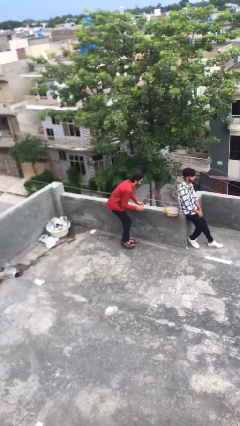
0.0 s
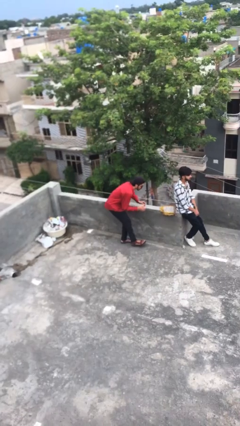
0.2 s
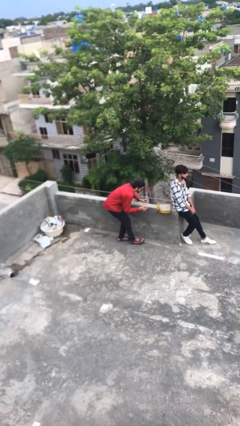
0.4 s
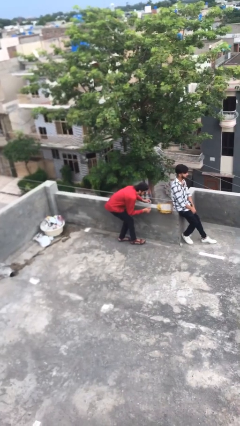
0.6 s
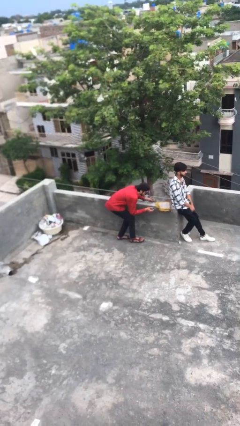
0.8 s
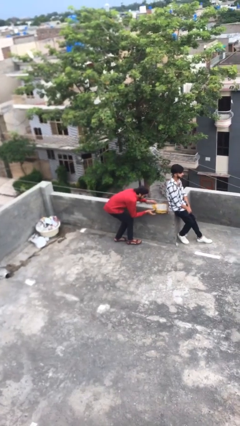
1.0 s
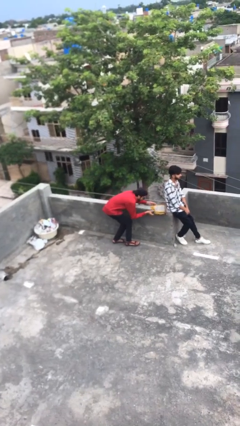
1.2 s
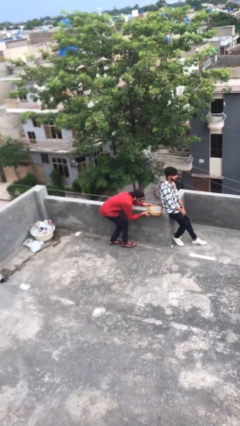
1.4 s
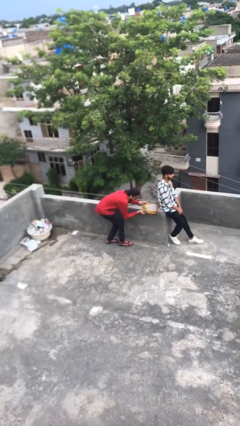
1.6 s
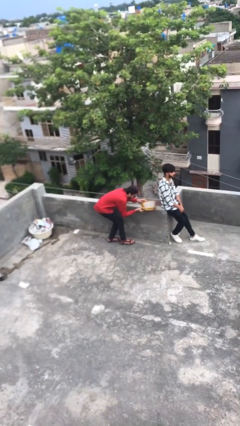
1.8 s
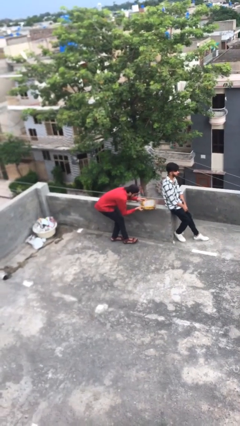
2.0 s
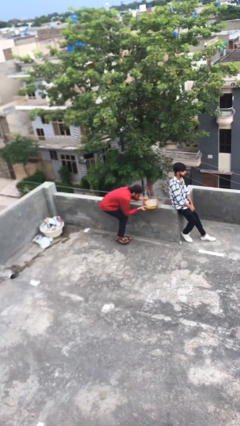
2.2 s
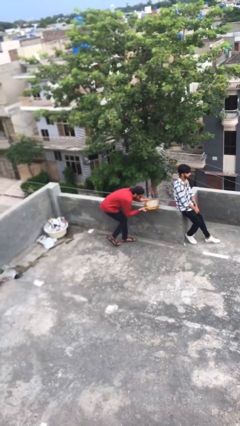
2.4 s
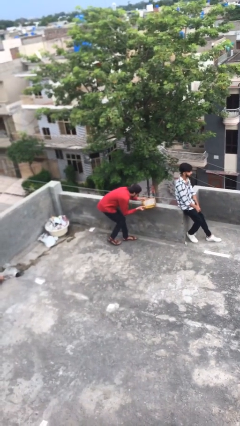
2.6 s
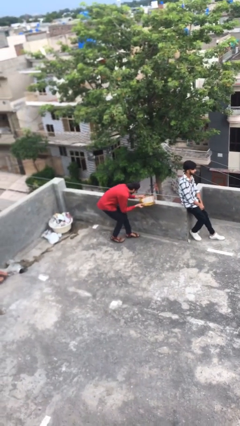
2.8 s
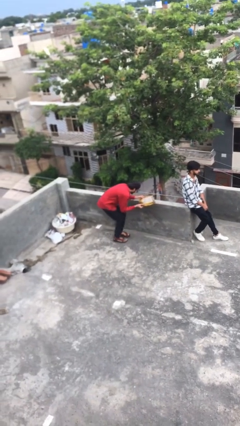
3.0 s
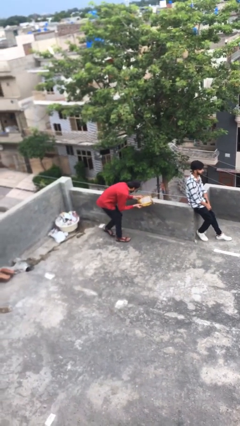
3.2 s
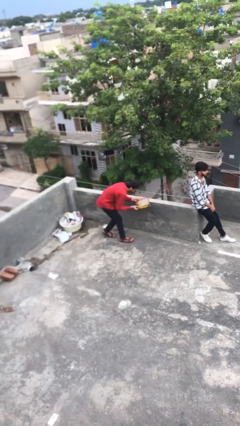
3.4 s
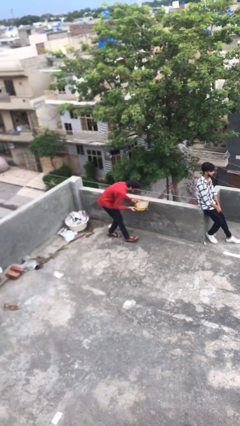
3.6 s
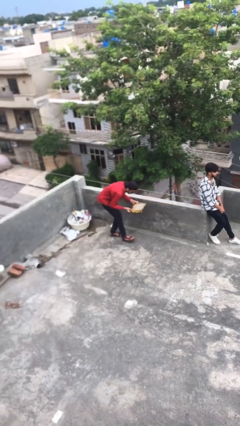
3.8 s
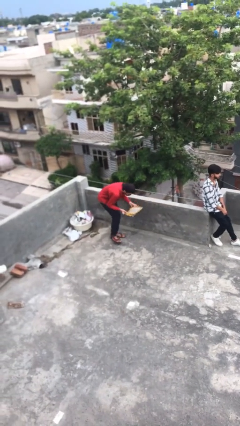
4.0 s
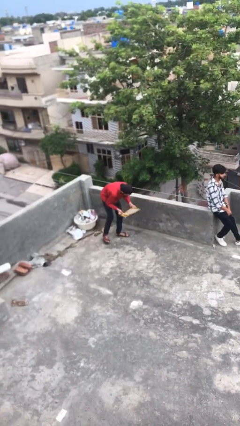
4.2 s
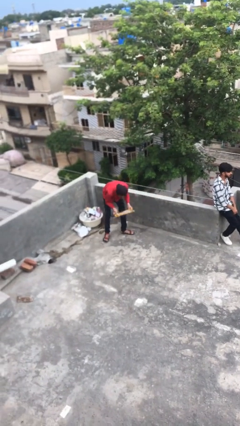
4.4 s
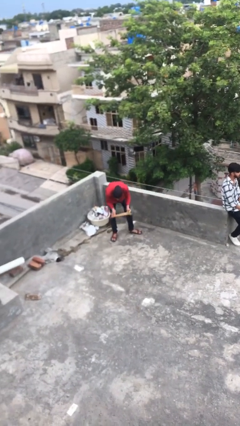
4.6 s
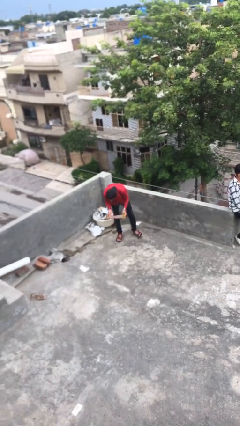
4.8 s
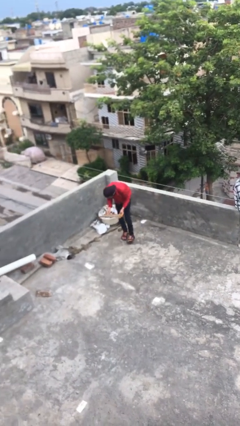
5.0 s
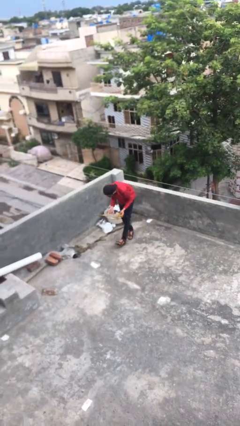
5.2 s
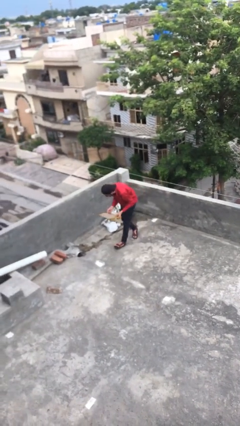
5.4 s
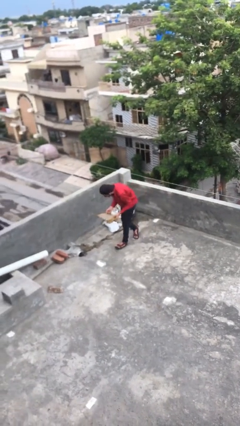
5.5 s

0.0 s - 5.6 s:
person steals object from person

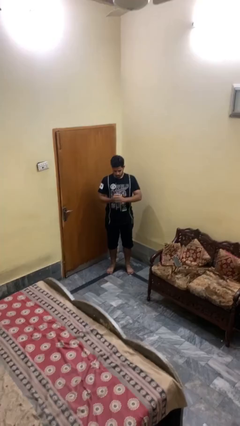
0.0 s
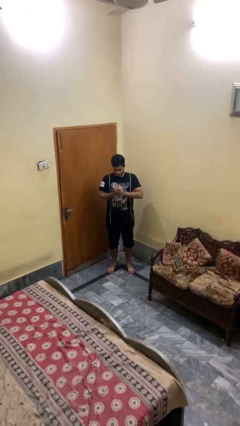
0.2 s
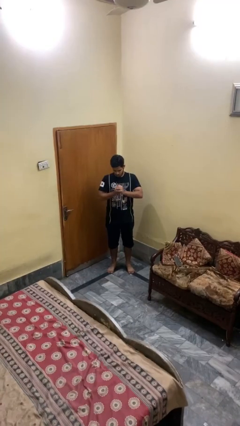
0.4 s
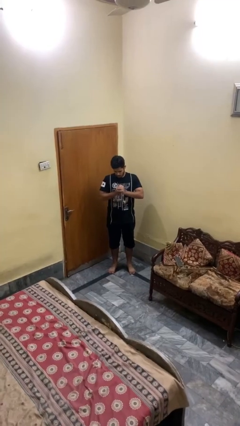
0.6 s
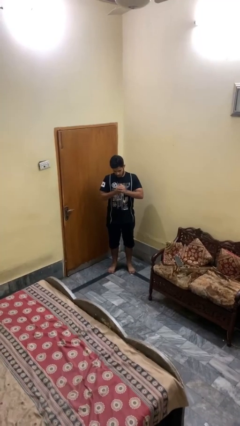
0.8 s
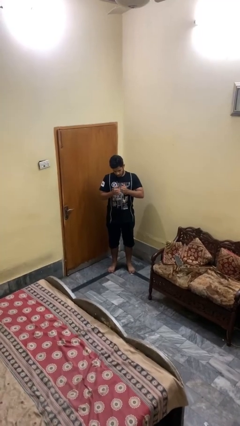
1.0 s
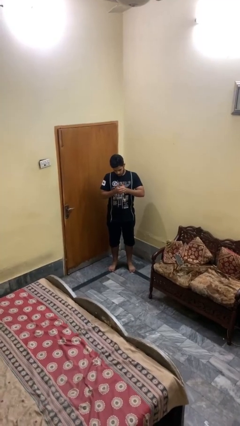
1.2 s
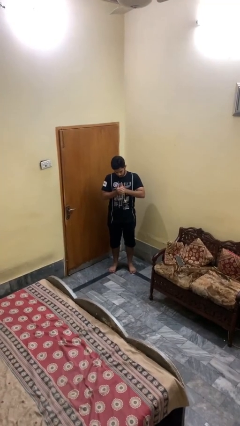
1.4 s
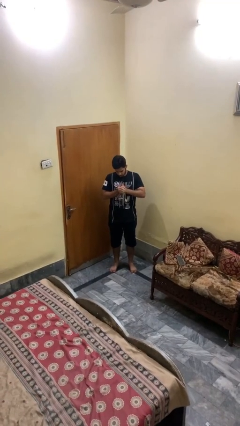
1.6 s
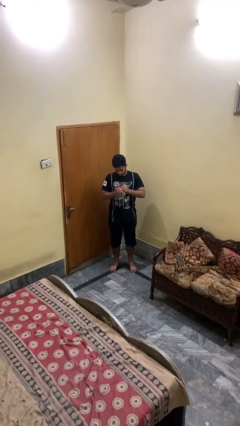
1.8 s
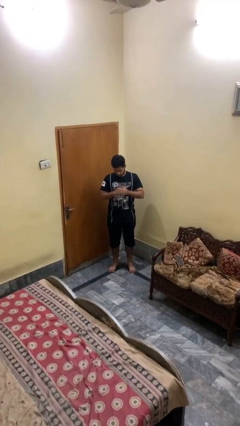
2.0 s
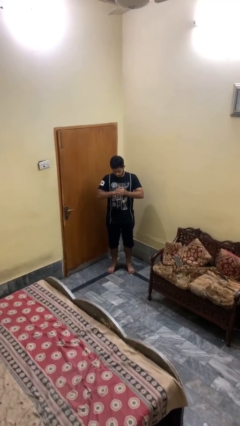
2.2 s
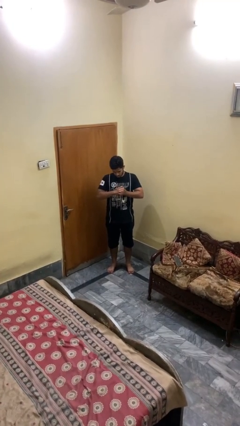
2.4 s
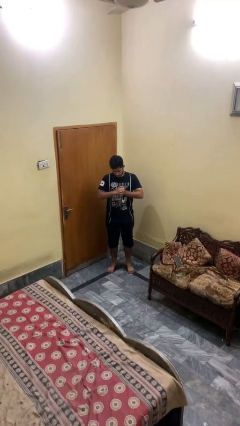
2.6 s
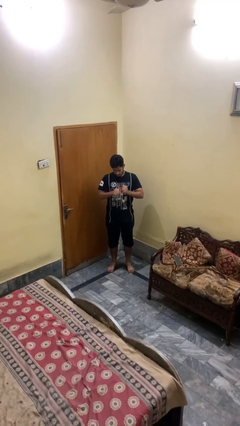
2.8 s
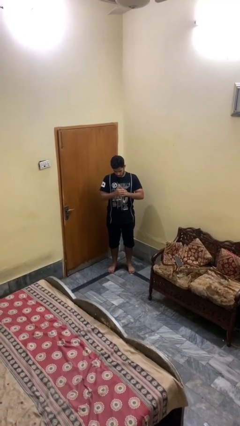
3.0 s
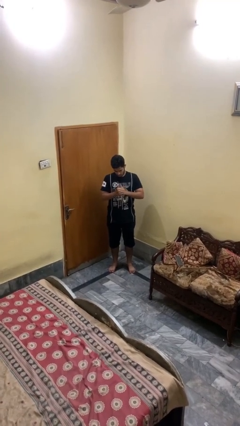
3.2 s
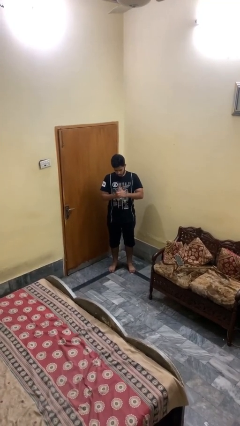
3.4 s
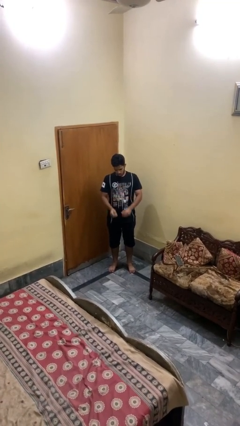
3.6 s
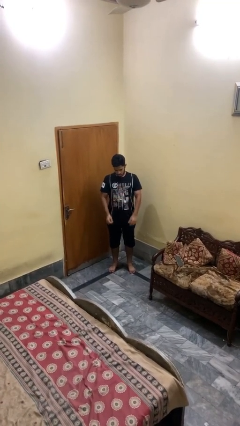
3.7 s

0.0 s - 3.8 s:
person cracks knuckles

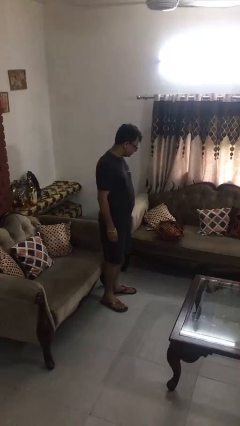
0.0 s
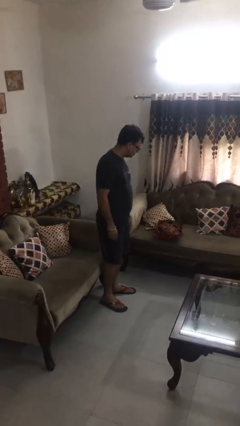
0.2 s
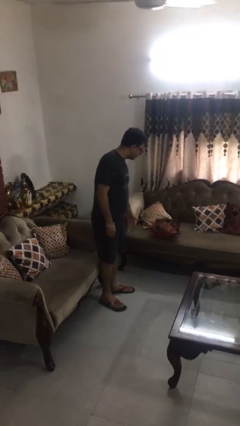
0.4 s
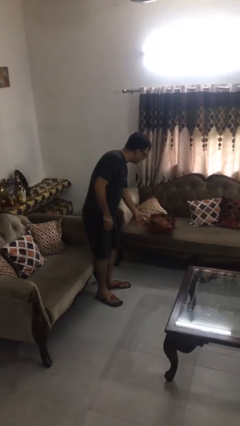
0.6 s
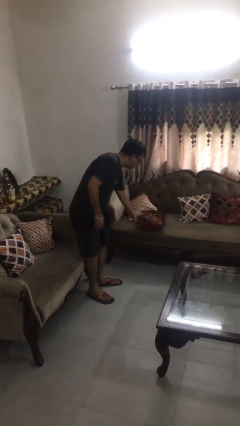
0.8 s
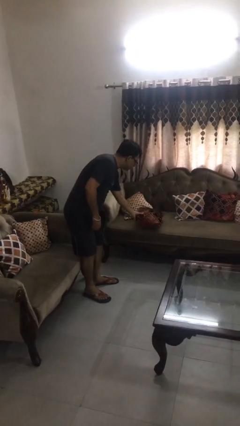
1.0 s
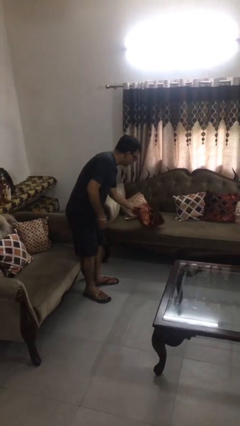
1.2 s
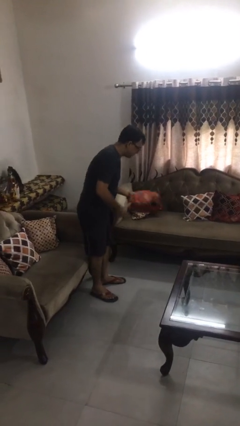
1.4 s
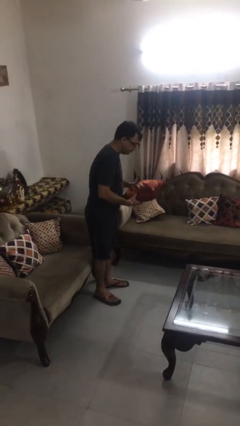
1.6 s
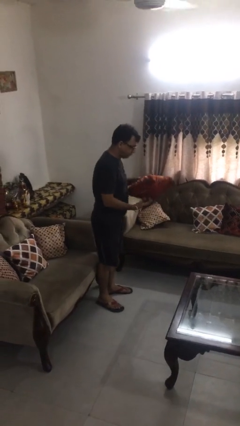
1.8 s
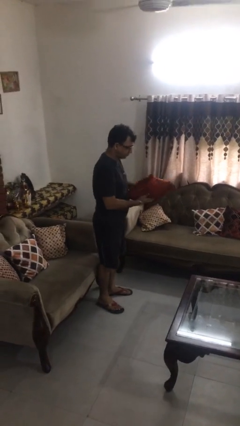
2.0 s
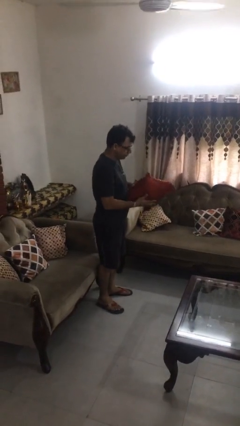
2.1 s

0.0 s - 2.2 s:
person picks up object from couch

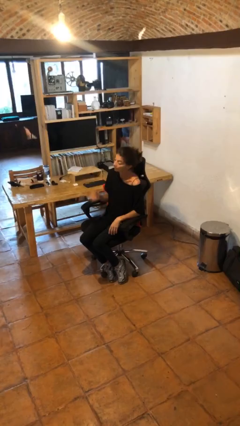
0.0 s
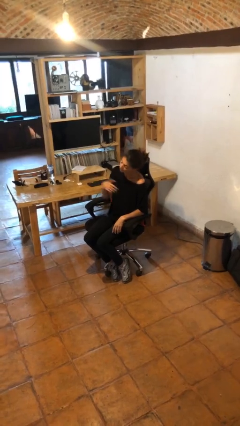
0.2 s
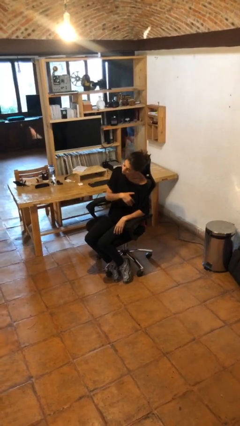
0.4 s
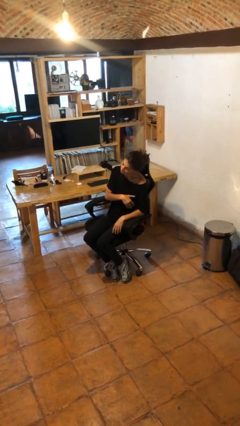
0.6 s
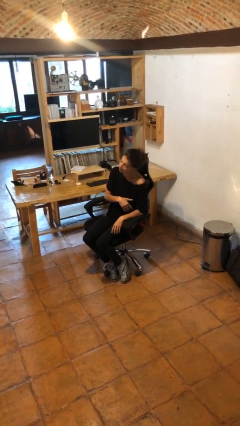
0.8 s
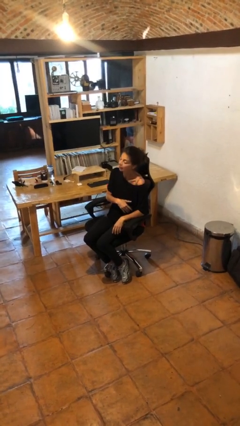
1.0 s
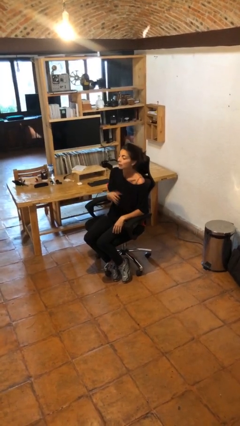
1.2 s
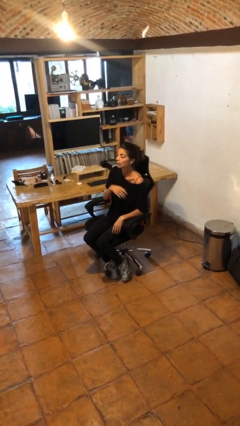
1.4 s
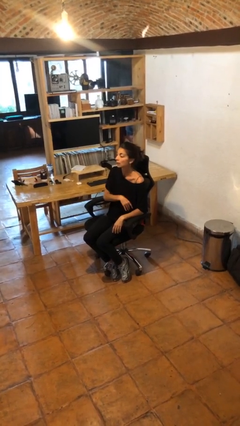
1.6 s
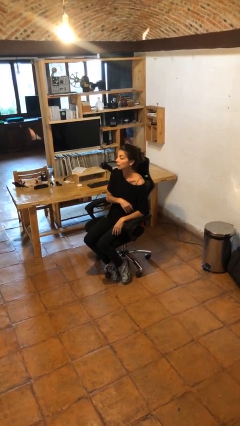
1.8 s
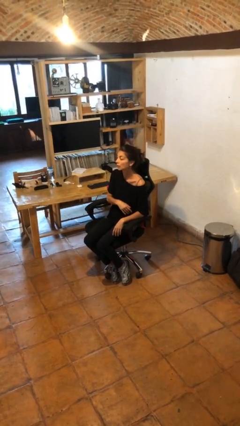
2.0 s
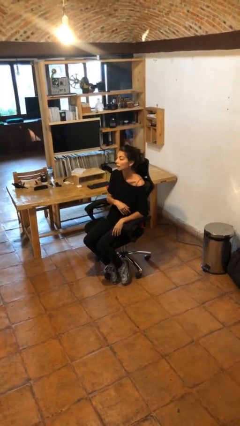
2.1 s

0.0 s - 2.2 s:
person gestures come here

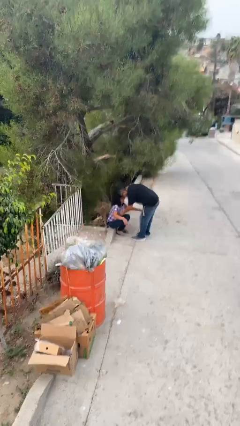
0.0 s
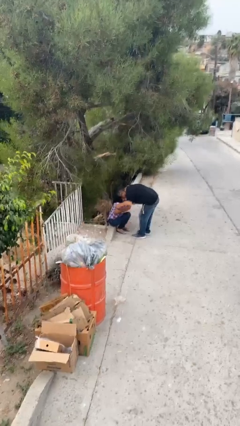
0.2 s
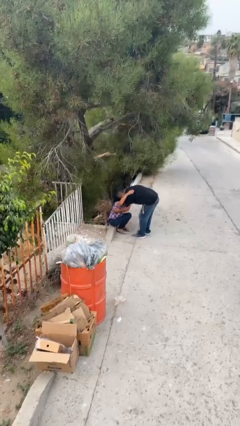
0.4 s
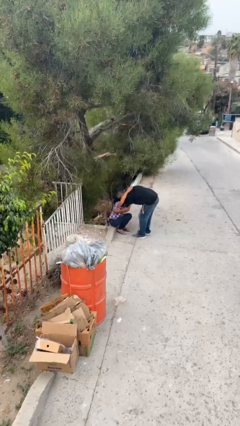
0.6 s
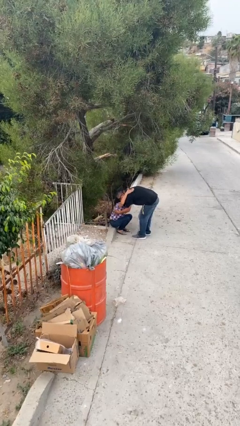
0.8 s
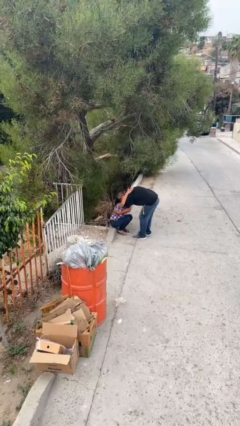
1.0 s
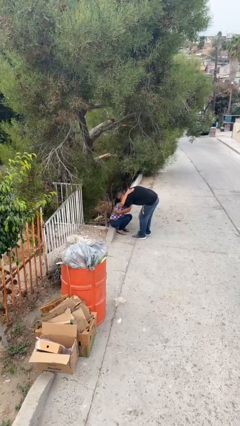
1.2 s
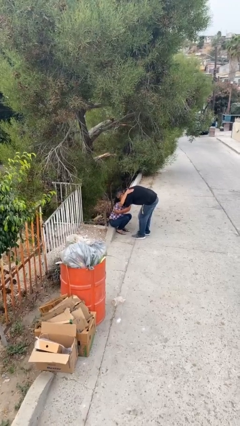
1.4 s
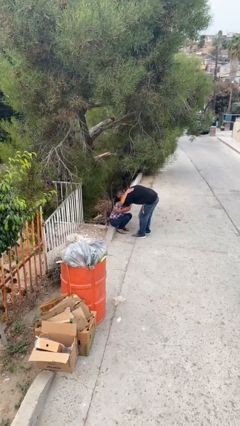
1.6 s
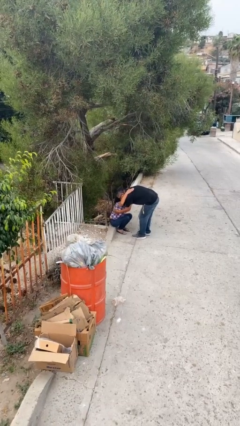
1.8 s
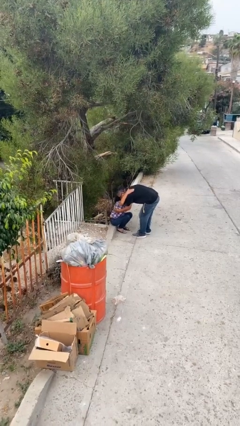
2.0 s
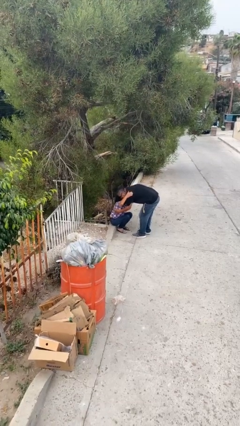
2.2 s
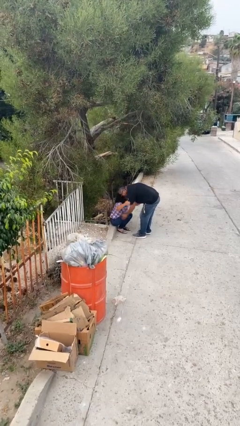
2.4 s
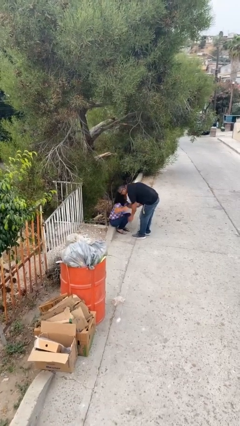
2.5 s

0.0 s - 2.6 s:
person embraces person

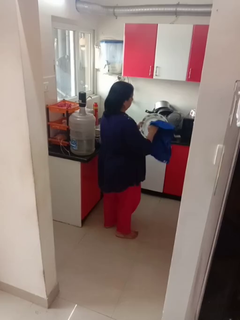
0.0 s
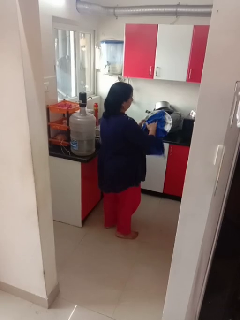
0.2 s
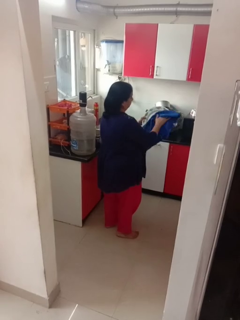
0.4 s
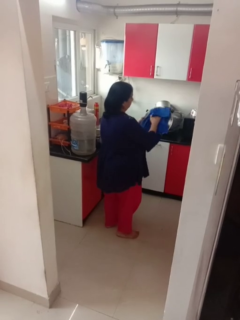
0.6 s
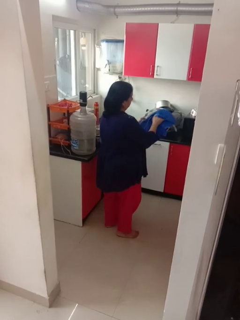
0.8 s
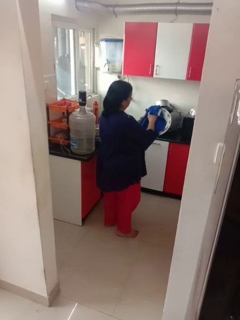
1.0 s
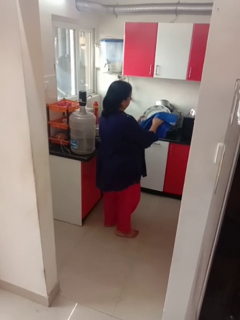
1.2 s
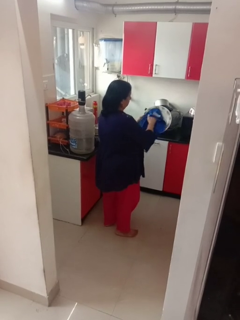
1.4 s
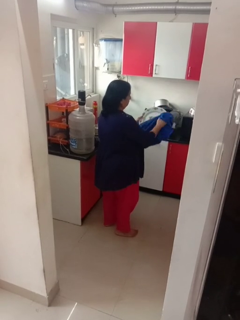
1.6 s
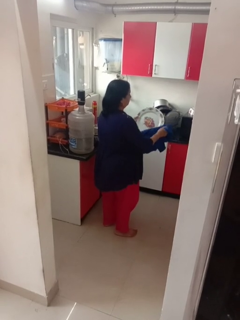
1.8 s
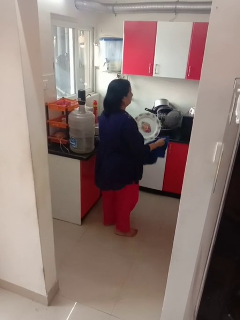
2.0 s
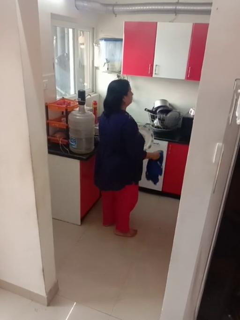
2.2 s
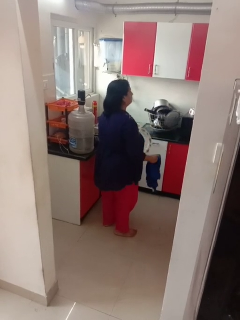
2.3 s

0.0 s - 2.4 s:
person dries dish
